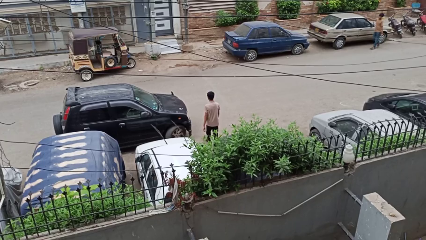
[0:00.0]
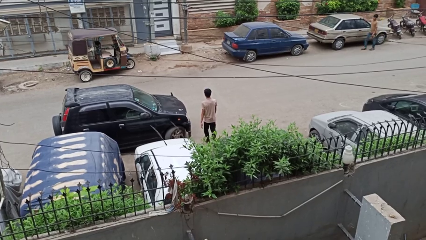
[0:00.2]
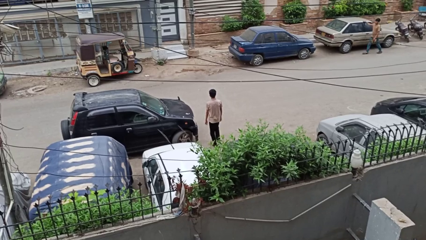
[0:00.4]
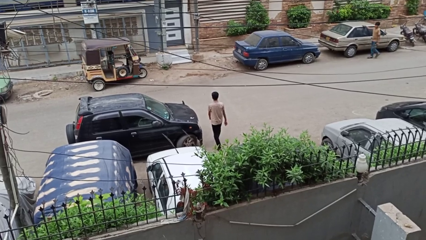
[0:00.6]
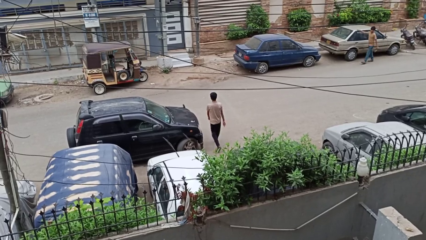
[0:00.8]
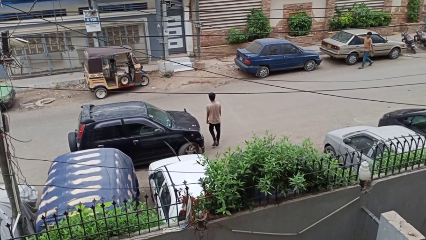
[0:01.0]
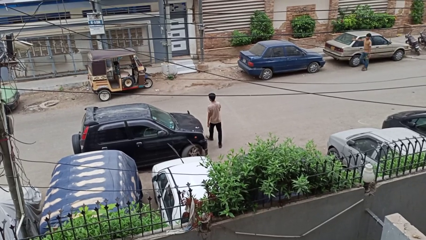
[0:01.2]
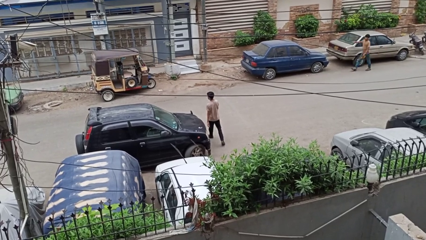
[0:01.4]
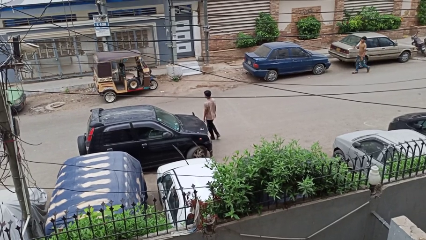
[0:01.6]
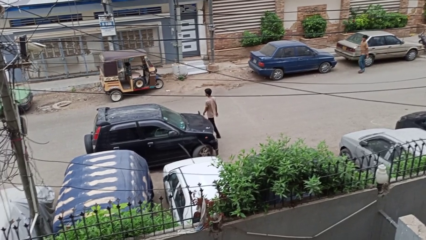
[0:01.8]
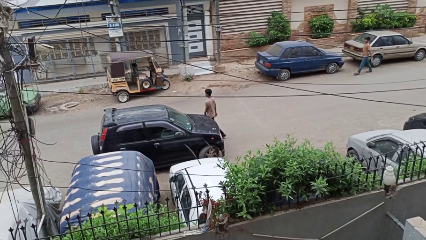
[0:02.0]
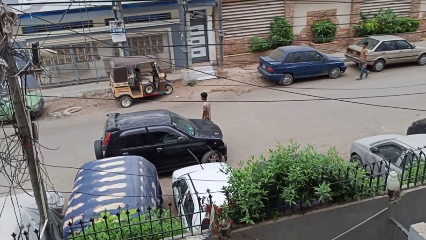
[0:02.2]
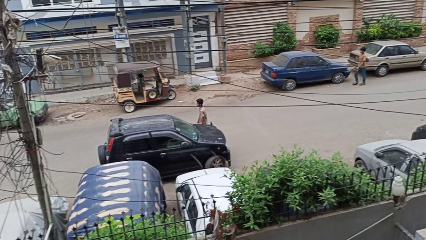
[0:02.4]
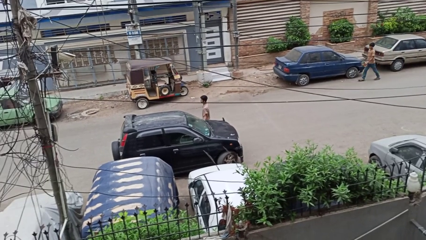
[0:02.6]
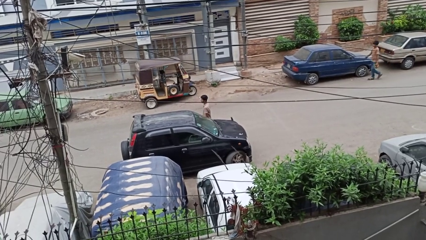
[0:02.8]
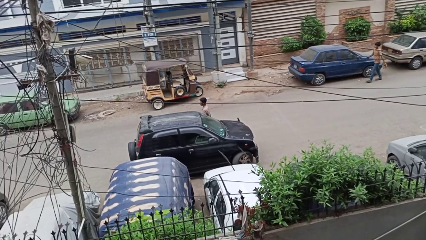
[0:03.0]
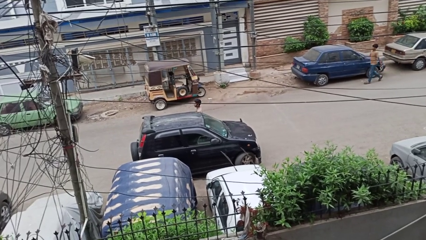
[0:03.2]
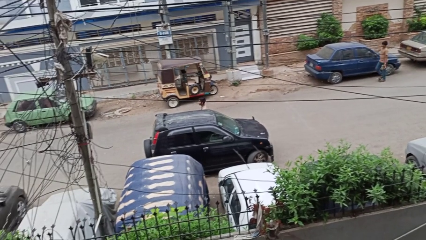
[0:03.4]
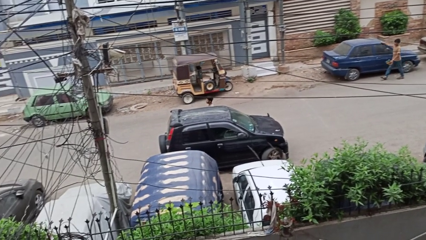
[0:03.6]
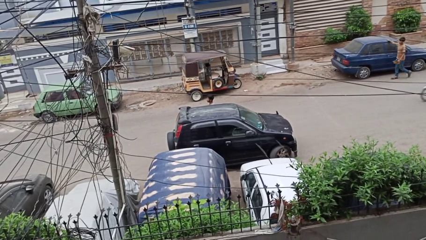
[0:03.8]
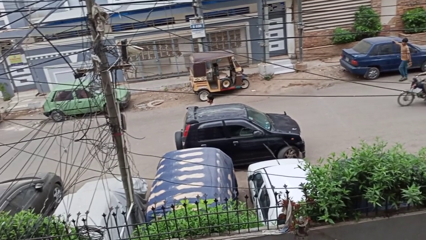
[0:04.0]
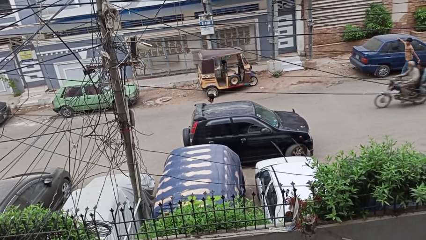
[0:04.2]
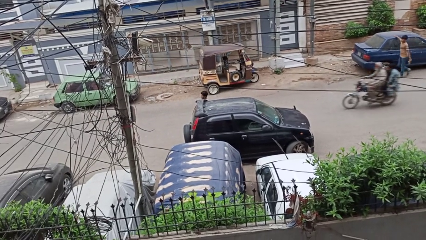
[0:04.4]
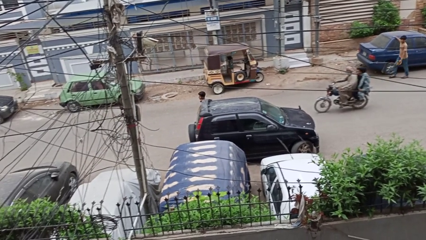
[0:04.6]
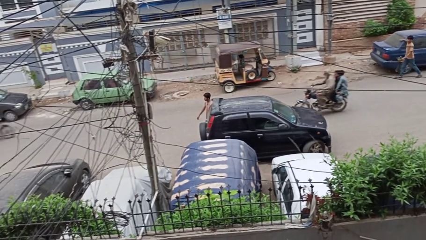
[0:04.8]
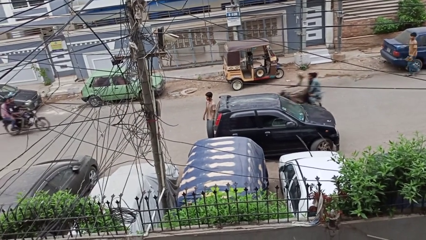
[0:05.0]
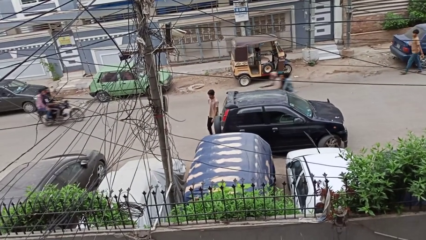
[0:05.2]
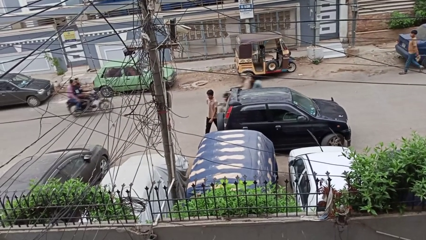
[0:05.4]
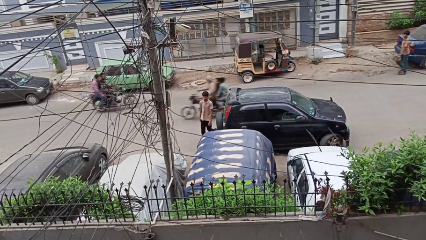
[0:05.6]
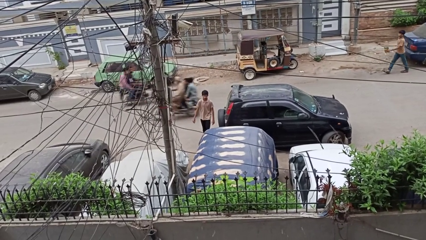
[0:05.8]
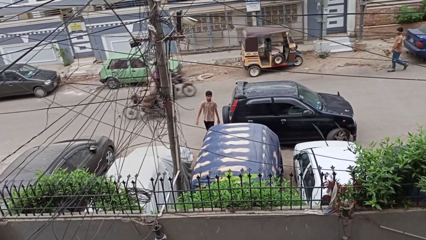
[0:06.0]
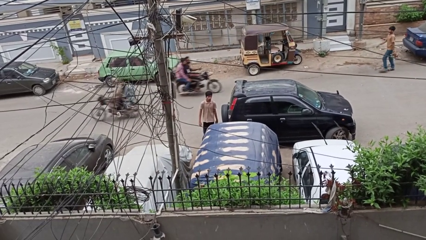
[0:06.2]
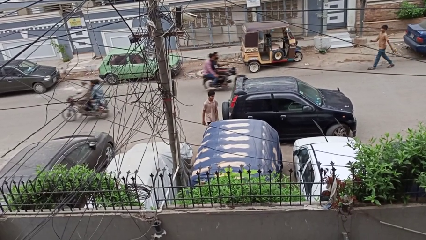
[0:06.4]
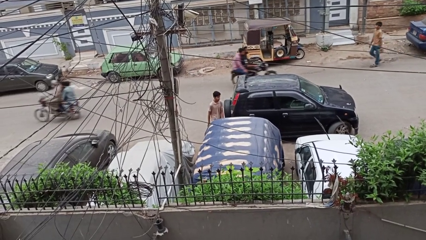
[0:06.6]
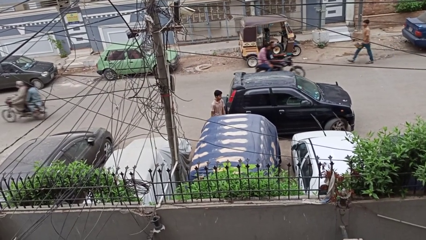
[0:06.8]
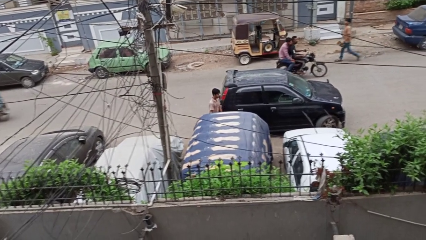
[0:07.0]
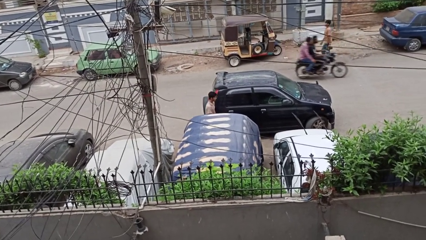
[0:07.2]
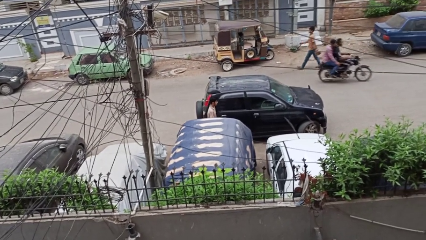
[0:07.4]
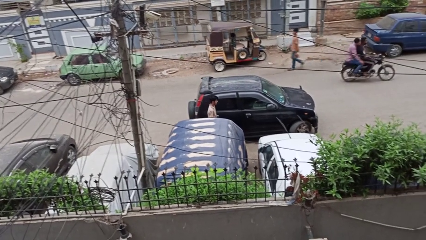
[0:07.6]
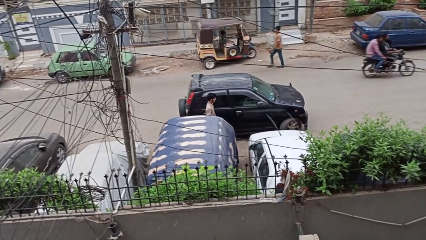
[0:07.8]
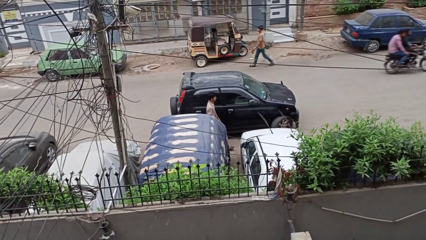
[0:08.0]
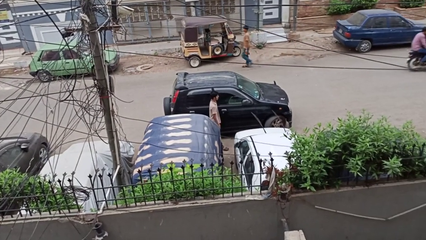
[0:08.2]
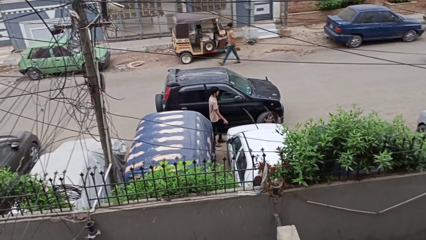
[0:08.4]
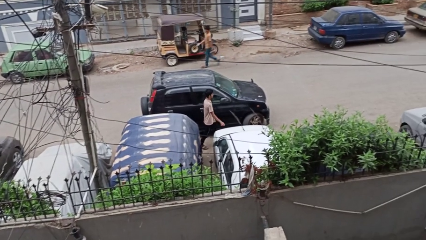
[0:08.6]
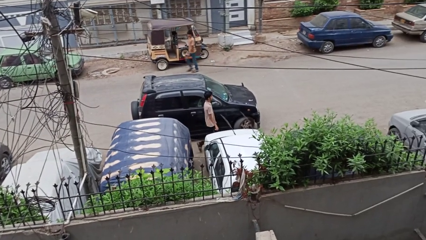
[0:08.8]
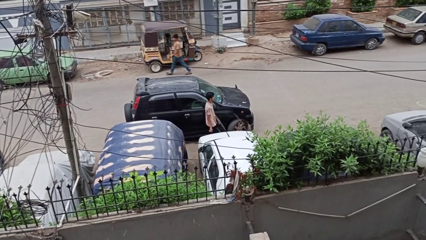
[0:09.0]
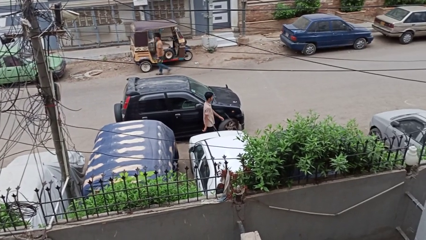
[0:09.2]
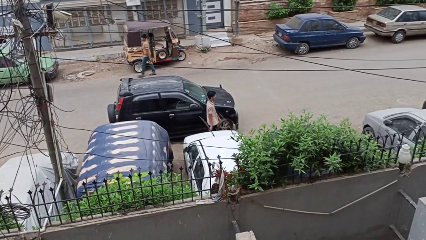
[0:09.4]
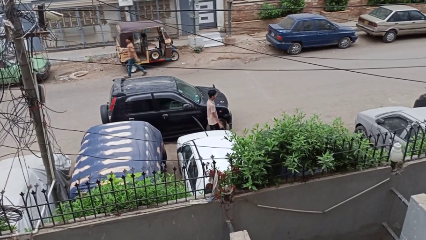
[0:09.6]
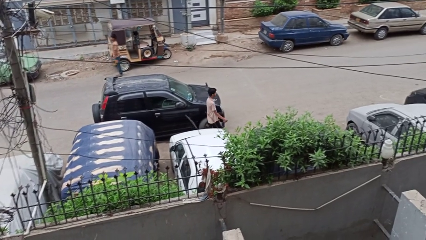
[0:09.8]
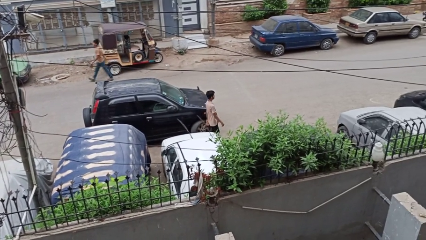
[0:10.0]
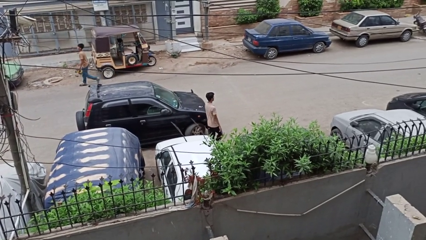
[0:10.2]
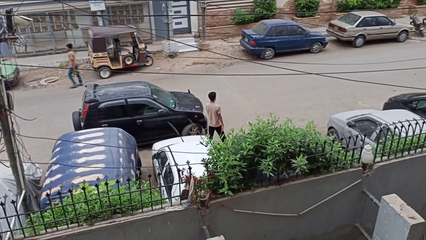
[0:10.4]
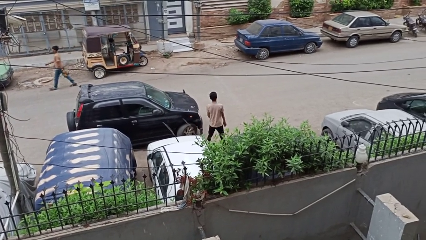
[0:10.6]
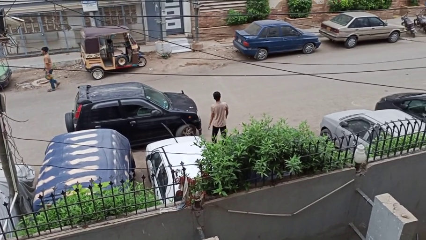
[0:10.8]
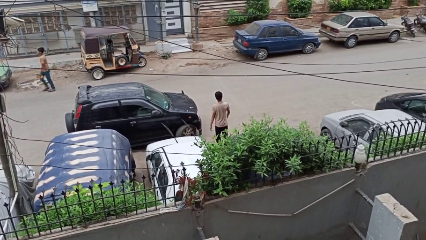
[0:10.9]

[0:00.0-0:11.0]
person walks around car

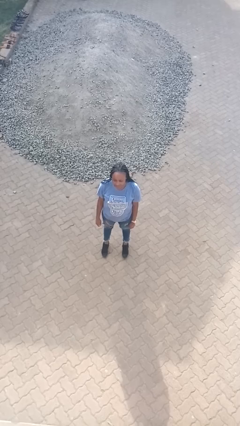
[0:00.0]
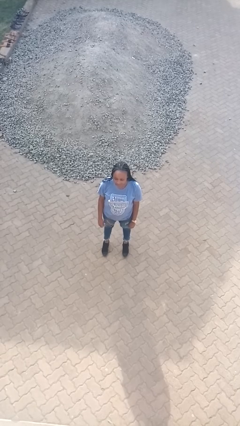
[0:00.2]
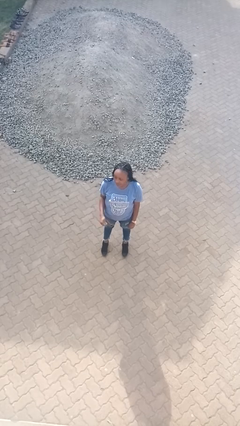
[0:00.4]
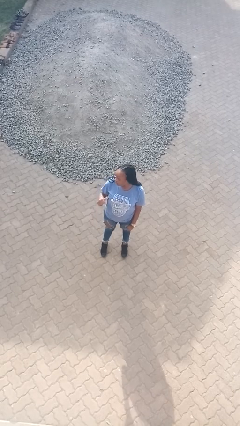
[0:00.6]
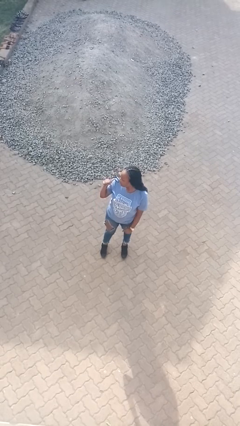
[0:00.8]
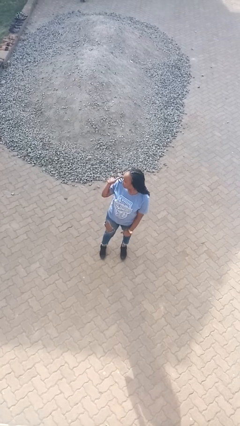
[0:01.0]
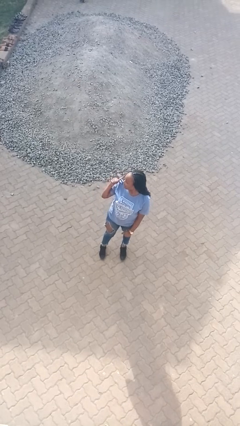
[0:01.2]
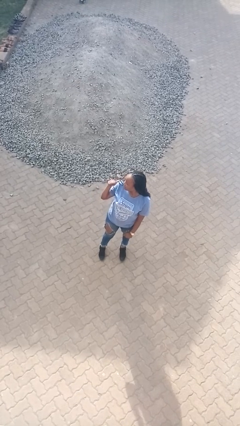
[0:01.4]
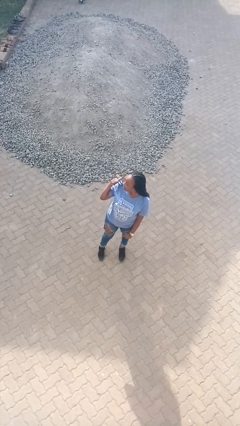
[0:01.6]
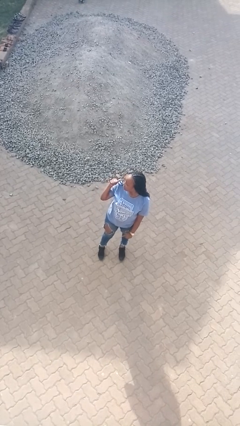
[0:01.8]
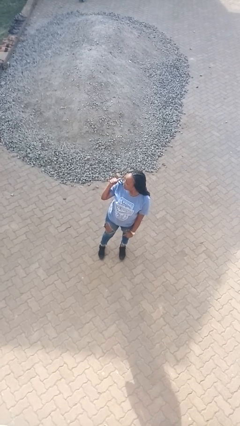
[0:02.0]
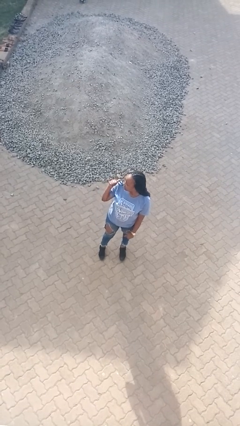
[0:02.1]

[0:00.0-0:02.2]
person gestures behind me

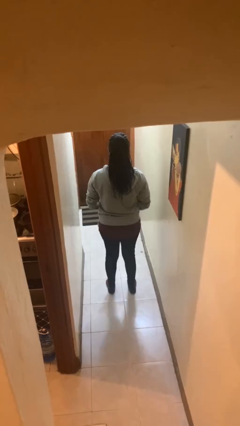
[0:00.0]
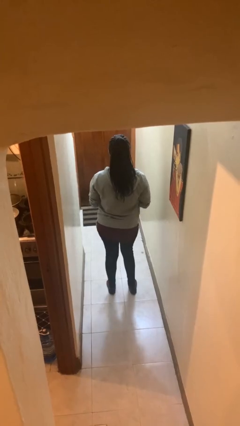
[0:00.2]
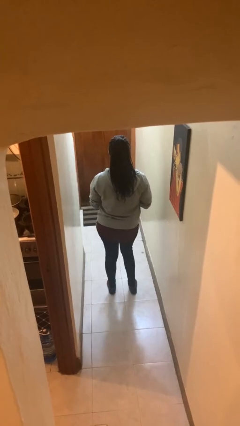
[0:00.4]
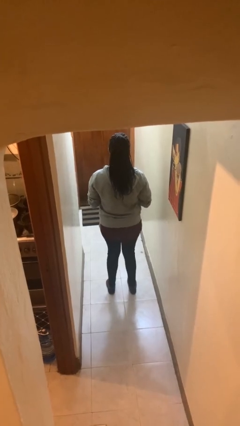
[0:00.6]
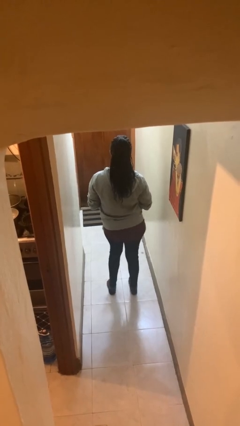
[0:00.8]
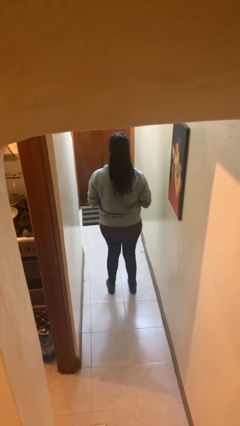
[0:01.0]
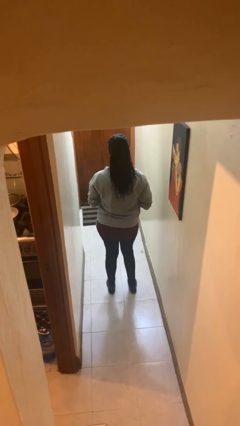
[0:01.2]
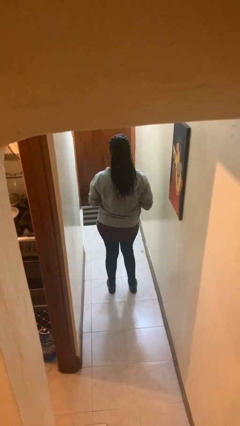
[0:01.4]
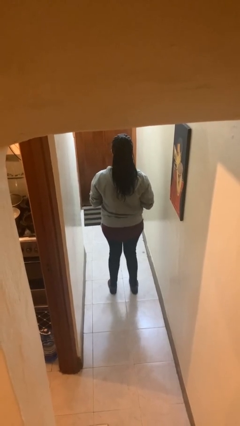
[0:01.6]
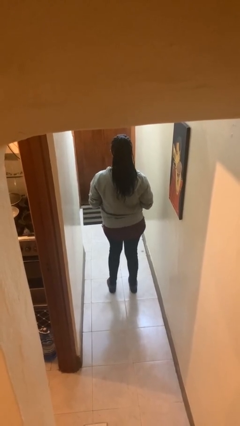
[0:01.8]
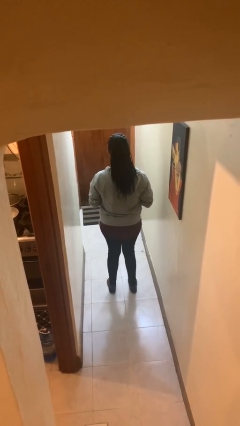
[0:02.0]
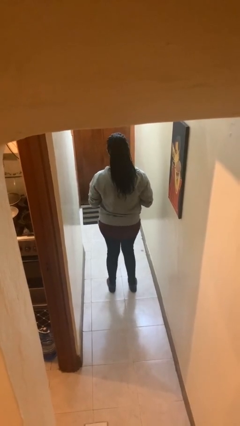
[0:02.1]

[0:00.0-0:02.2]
person wiggles hips

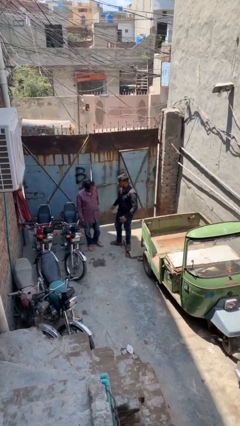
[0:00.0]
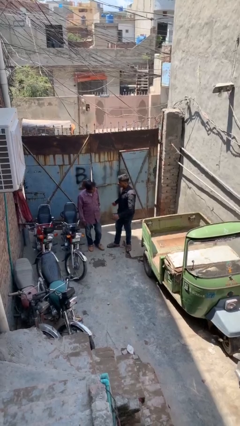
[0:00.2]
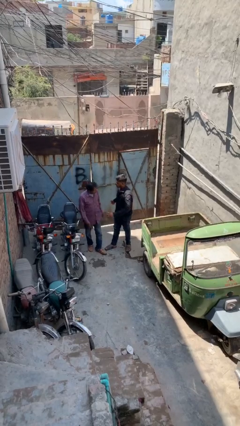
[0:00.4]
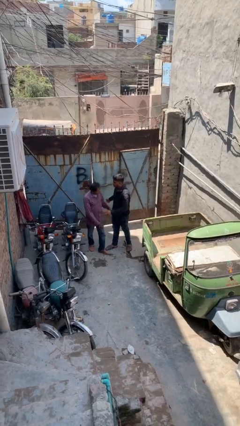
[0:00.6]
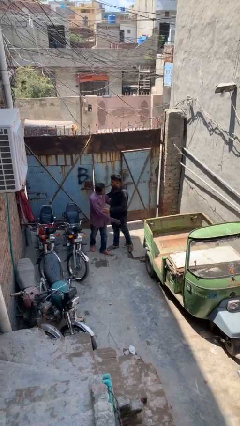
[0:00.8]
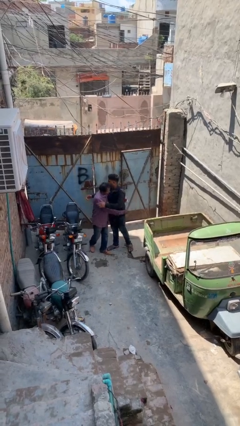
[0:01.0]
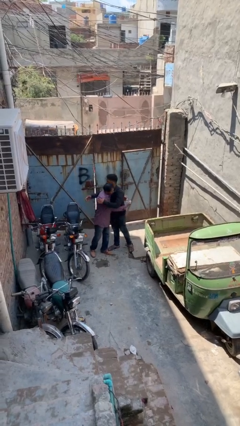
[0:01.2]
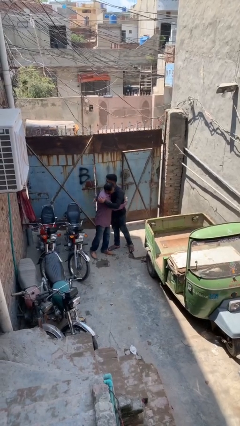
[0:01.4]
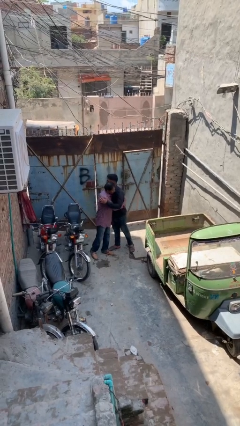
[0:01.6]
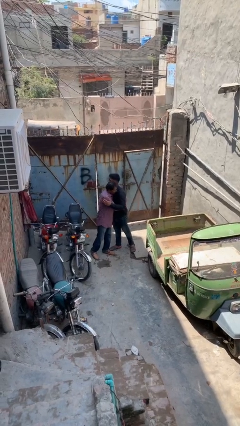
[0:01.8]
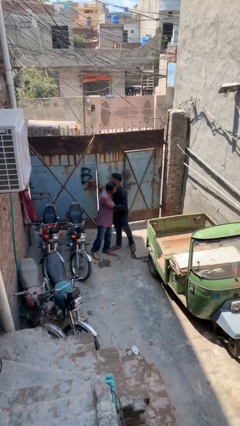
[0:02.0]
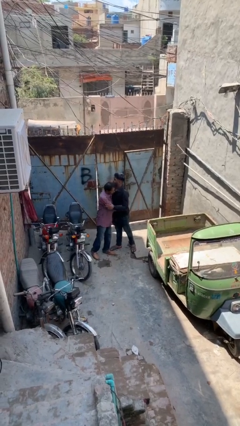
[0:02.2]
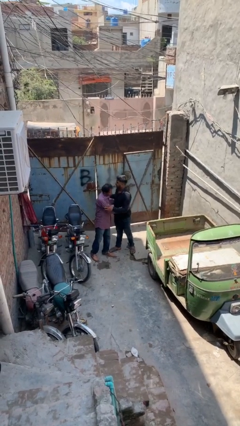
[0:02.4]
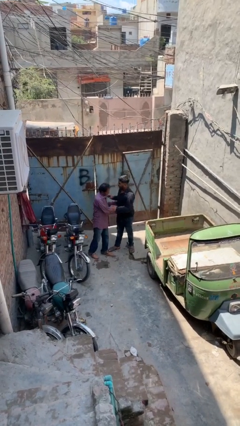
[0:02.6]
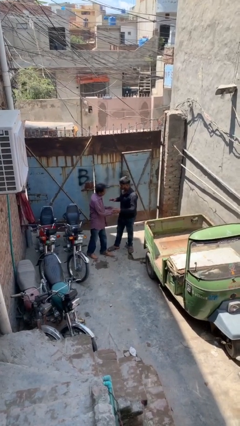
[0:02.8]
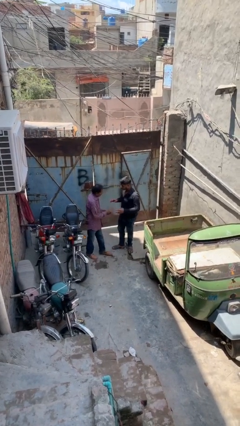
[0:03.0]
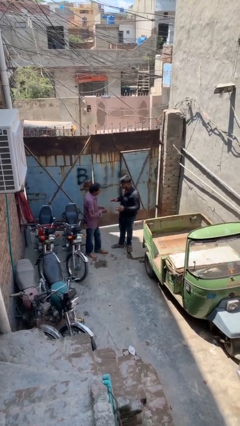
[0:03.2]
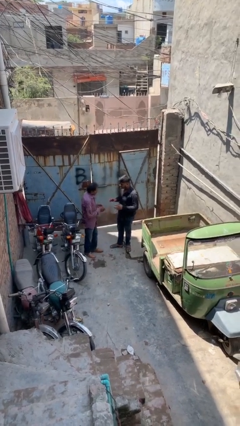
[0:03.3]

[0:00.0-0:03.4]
person embraces person
